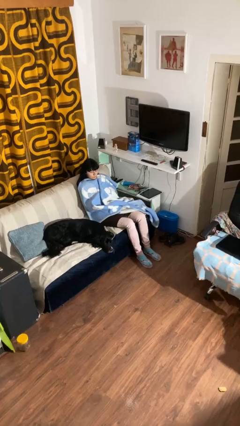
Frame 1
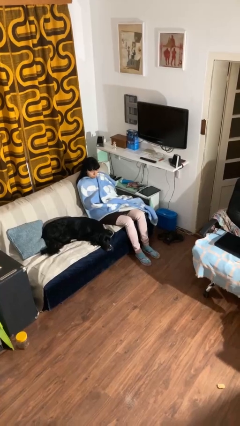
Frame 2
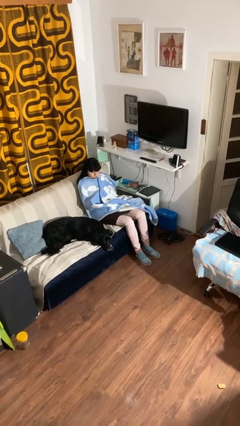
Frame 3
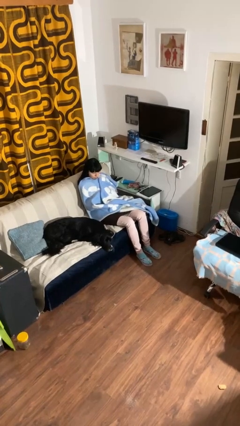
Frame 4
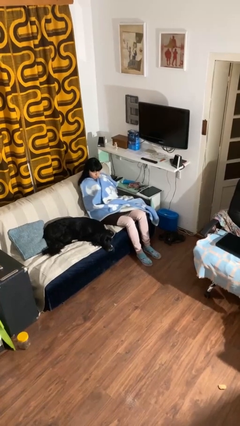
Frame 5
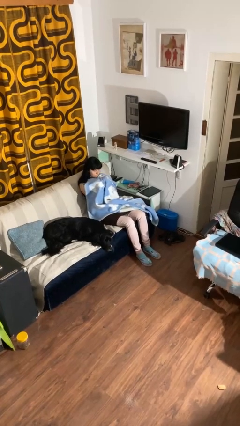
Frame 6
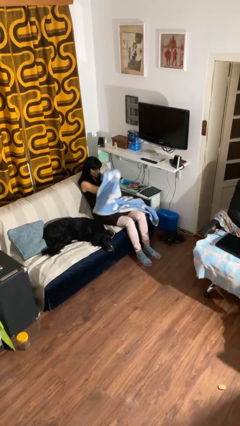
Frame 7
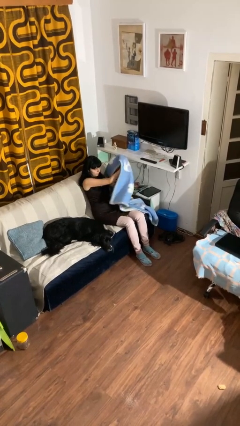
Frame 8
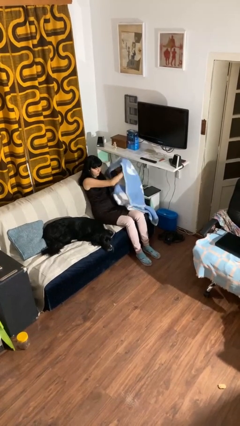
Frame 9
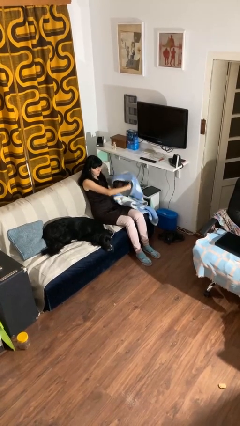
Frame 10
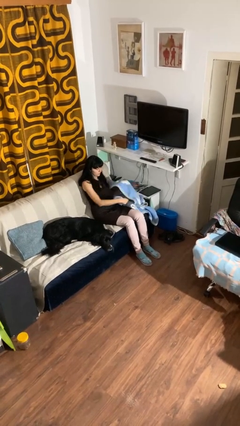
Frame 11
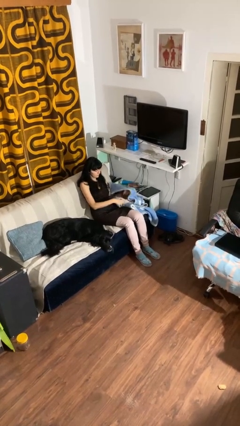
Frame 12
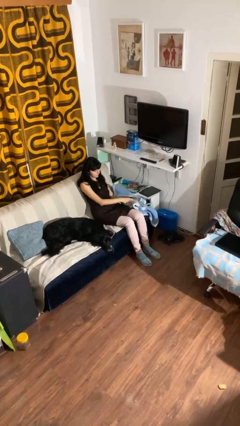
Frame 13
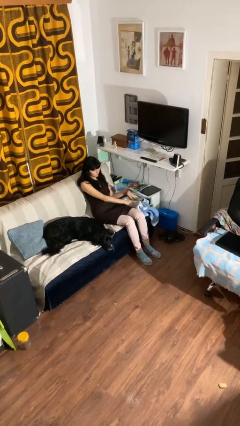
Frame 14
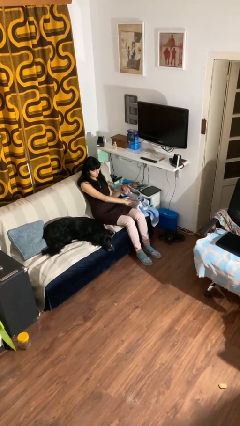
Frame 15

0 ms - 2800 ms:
person uncovers with blanket

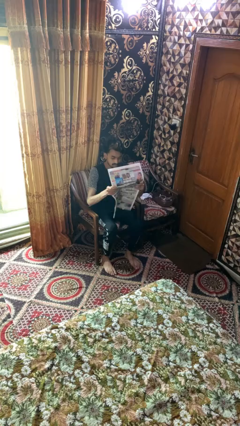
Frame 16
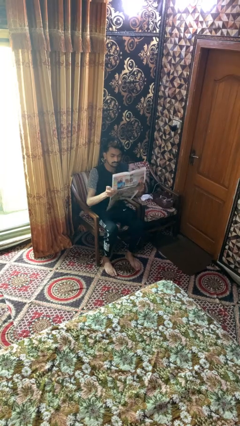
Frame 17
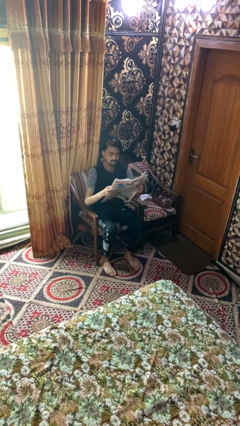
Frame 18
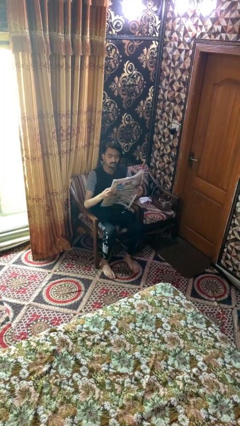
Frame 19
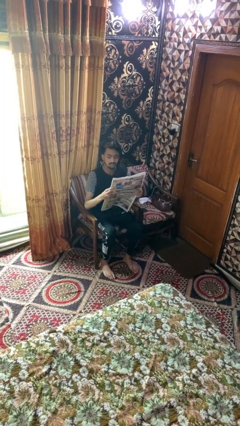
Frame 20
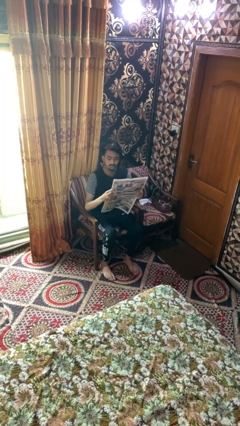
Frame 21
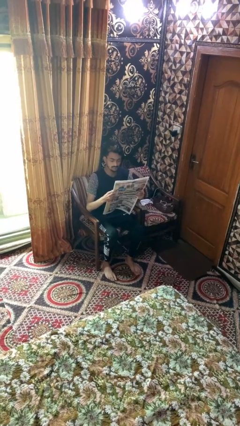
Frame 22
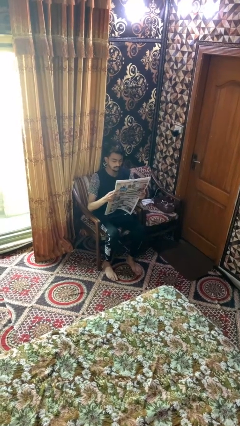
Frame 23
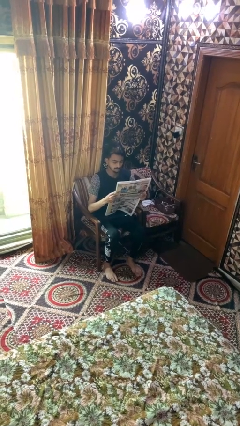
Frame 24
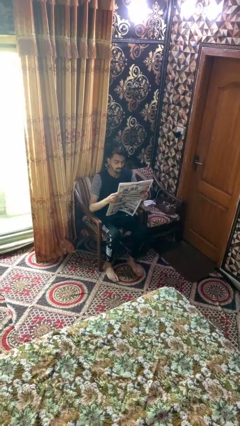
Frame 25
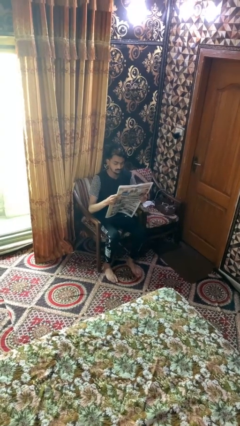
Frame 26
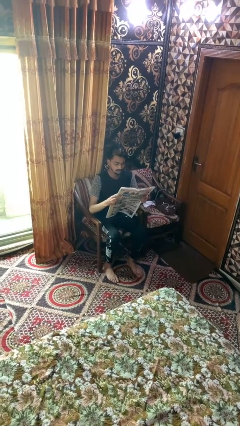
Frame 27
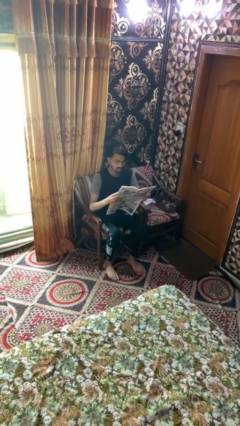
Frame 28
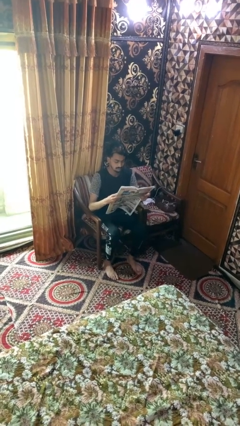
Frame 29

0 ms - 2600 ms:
person reads newspaper

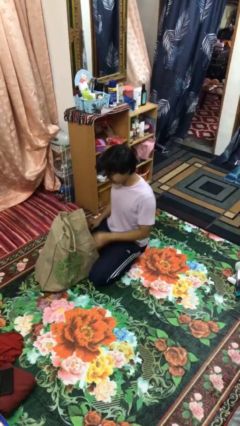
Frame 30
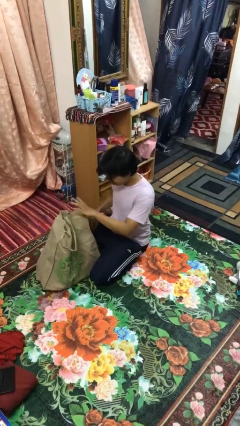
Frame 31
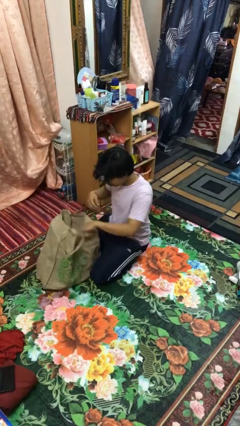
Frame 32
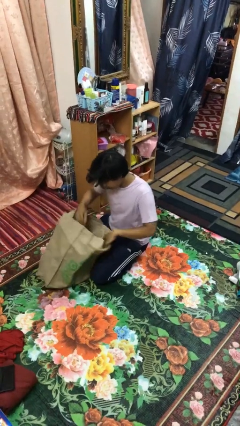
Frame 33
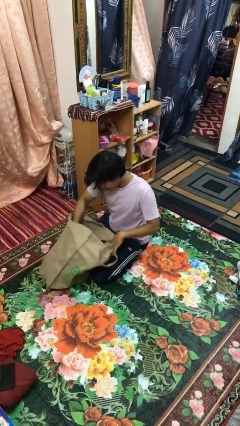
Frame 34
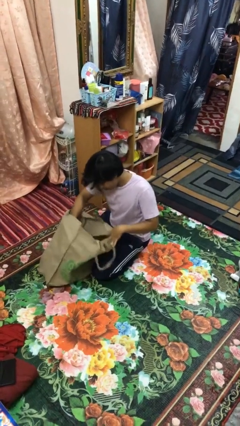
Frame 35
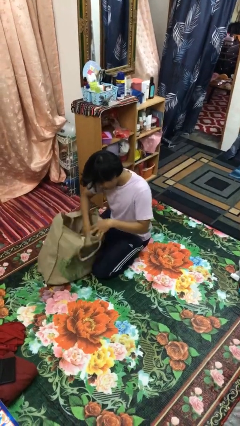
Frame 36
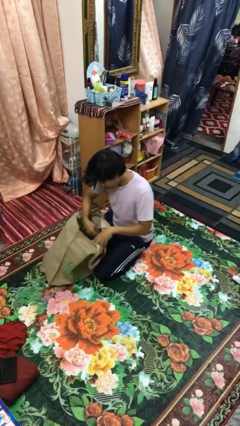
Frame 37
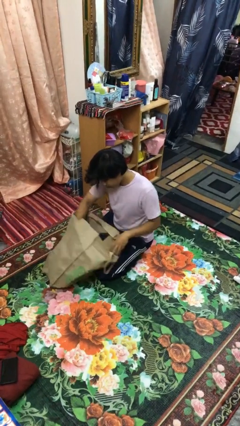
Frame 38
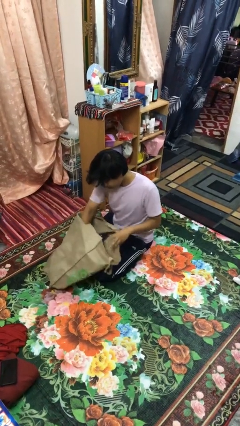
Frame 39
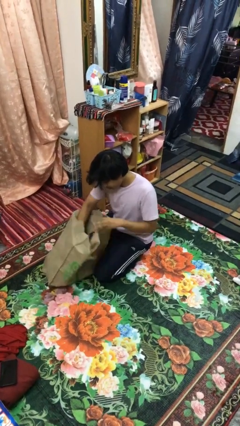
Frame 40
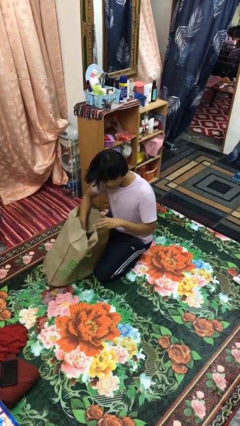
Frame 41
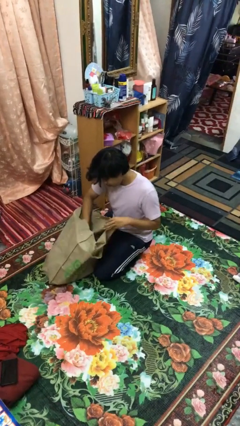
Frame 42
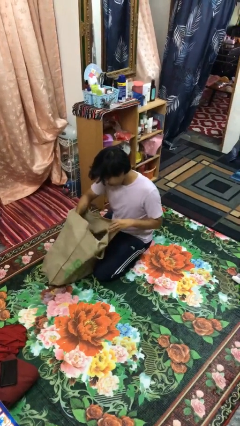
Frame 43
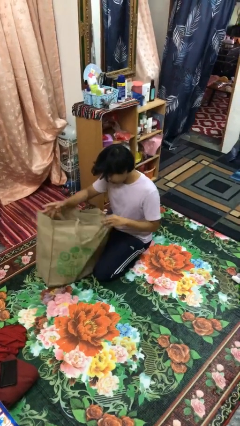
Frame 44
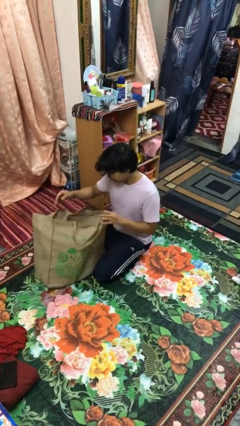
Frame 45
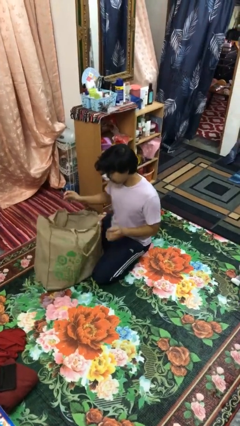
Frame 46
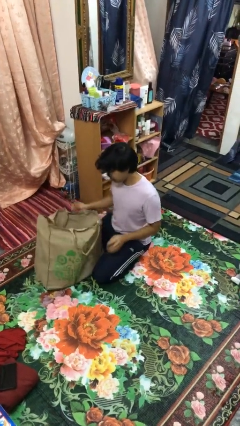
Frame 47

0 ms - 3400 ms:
person searches in bag

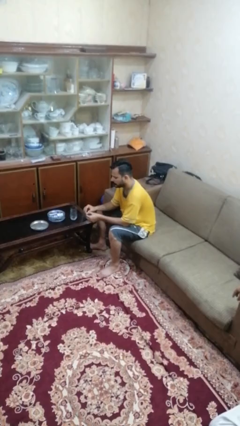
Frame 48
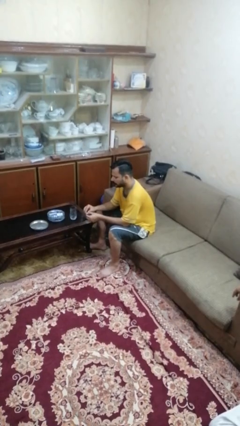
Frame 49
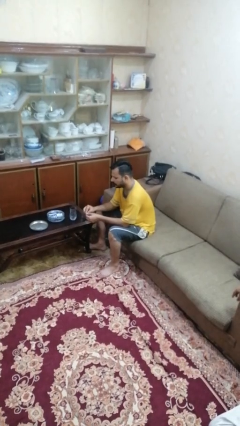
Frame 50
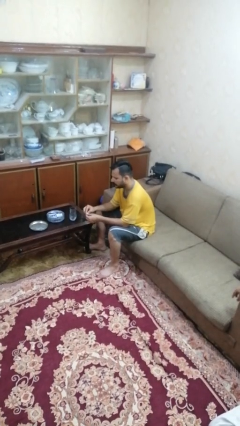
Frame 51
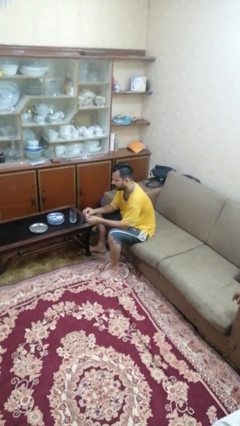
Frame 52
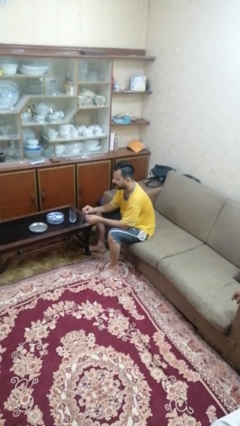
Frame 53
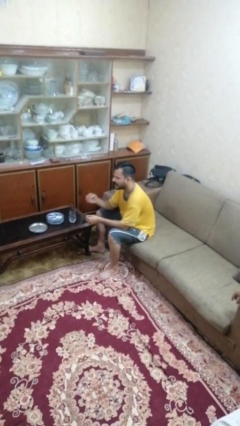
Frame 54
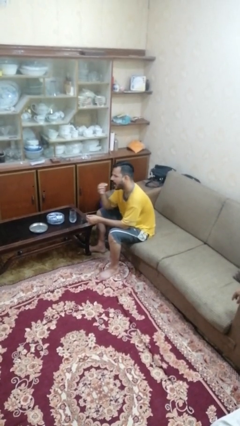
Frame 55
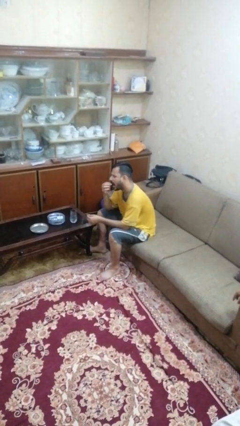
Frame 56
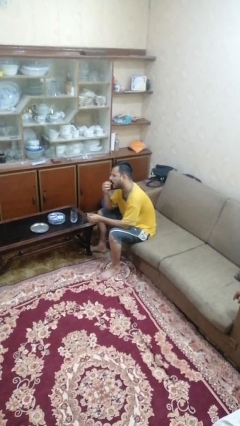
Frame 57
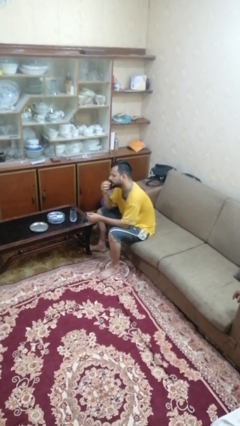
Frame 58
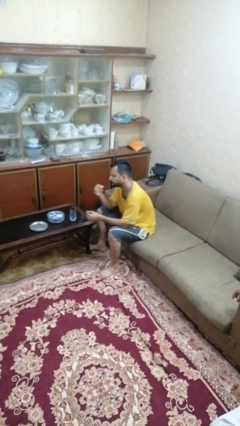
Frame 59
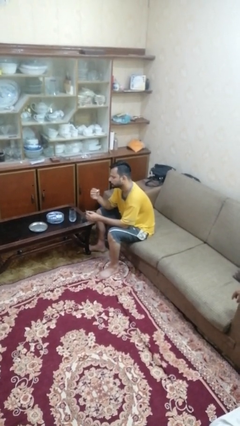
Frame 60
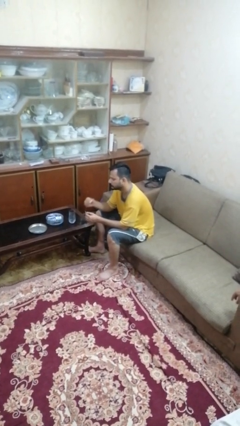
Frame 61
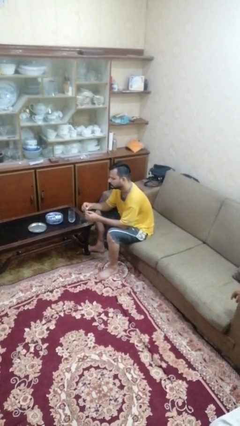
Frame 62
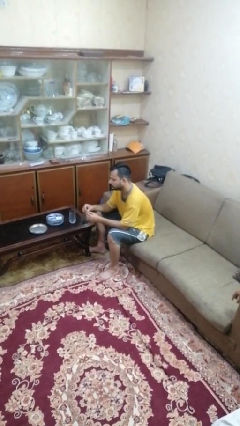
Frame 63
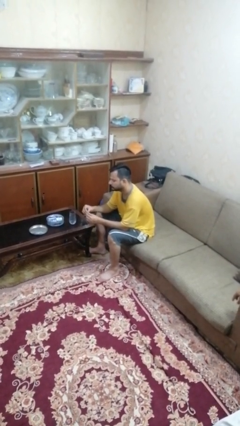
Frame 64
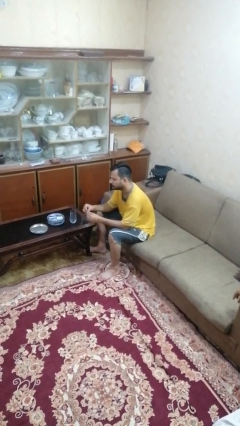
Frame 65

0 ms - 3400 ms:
person takes medicine pills

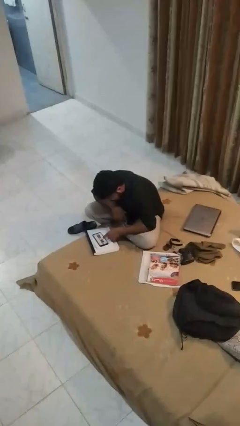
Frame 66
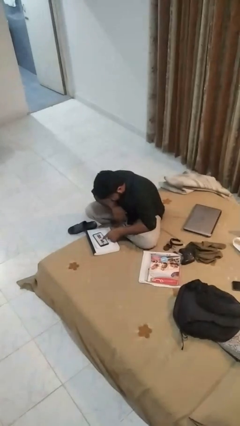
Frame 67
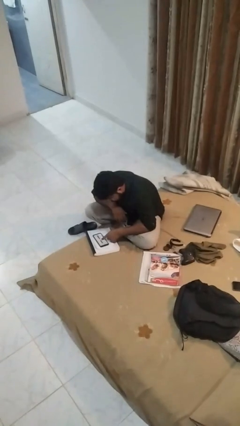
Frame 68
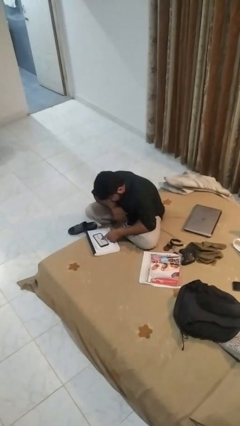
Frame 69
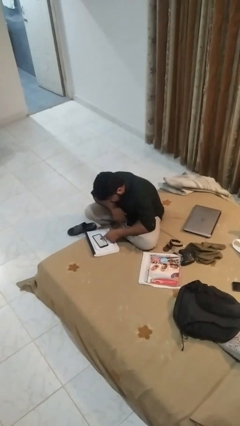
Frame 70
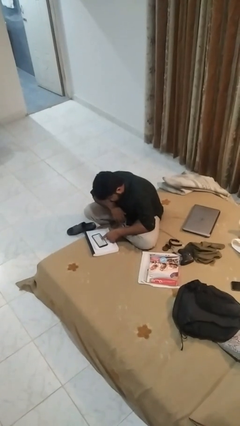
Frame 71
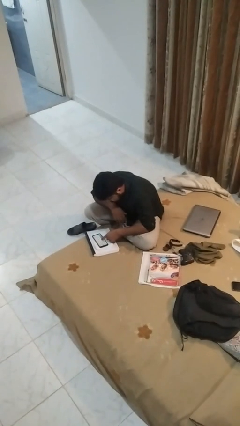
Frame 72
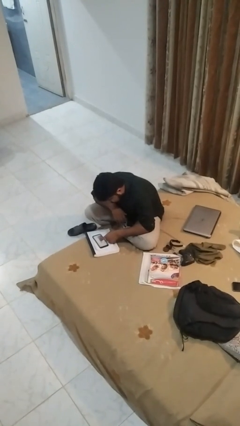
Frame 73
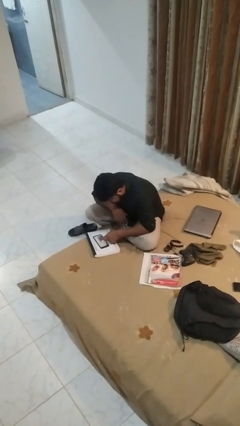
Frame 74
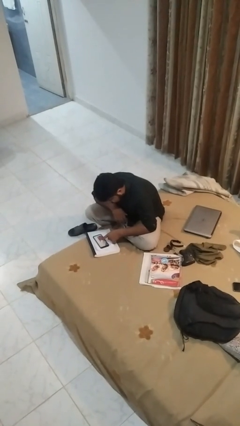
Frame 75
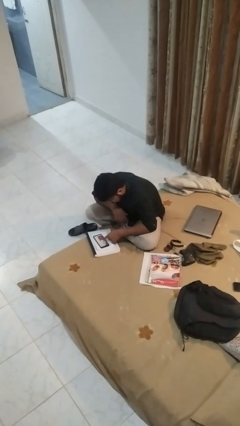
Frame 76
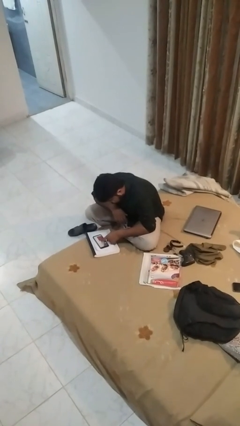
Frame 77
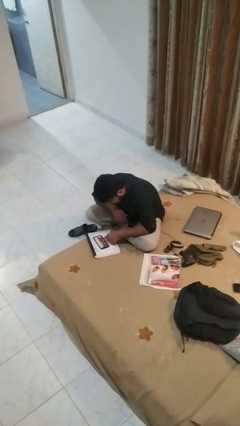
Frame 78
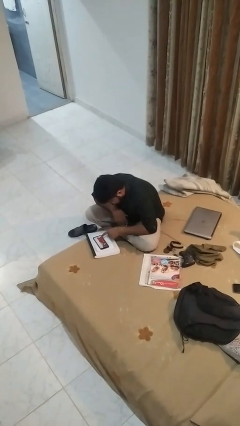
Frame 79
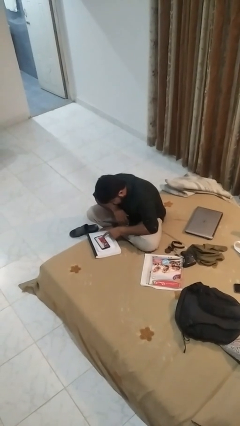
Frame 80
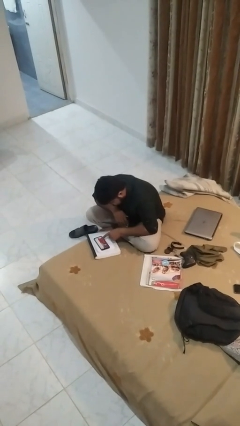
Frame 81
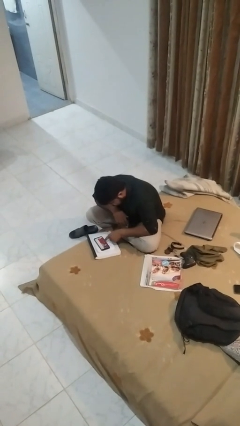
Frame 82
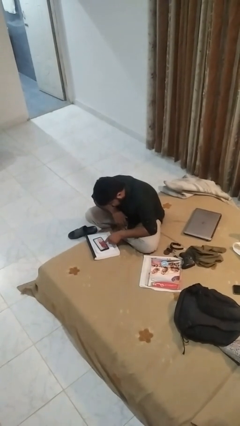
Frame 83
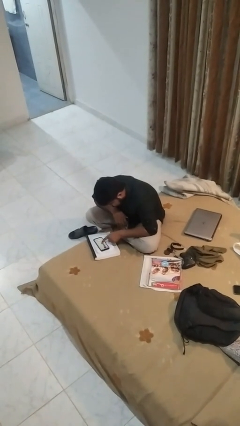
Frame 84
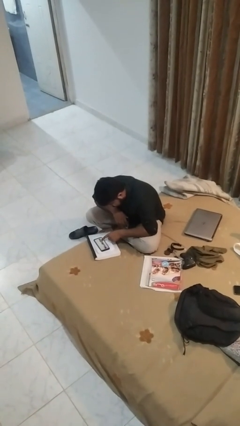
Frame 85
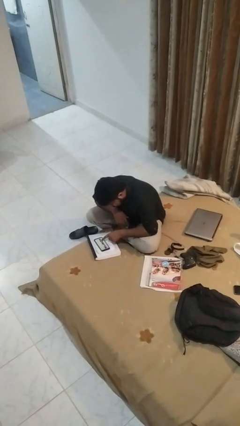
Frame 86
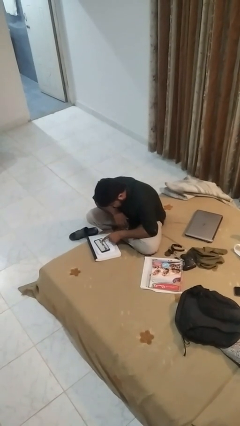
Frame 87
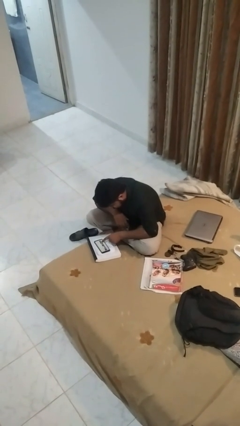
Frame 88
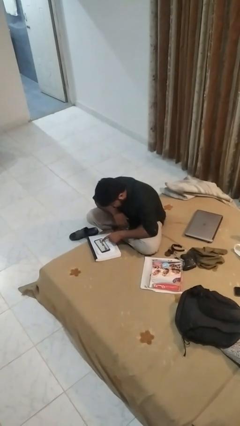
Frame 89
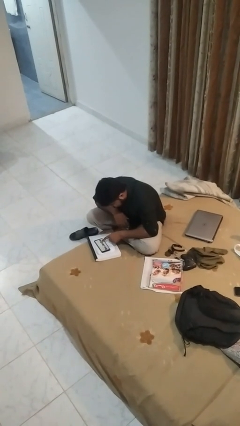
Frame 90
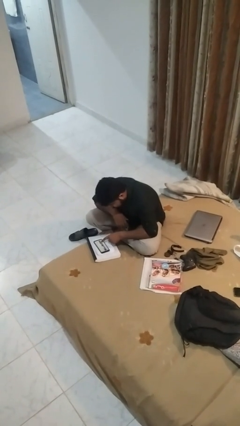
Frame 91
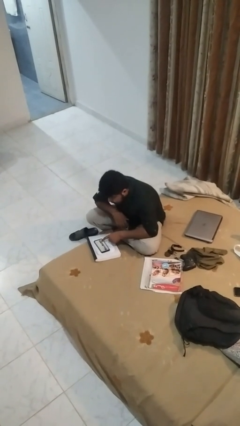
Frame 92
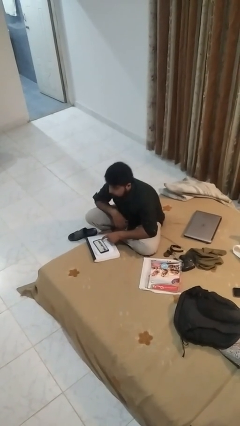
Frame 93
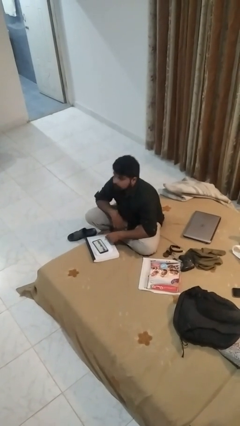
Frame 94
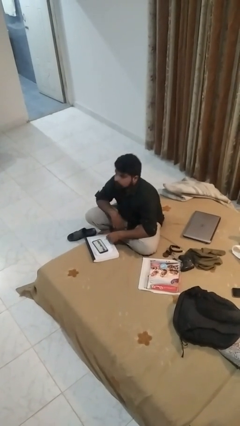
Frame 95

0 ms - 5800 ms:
person interacts with tablet
